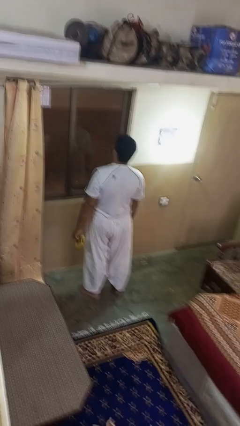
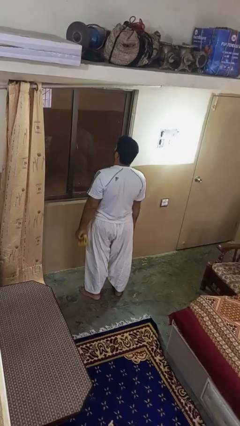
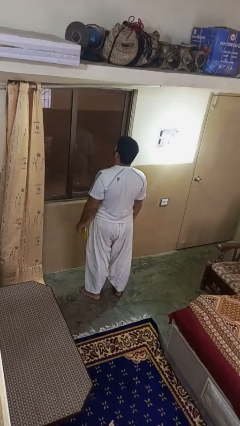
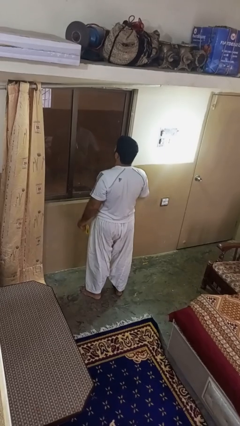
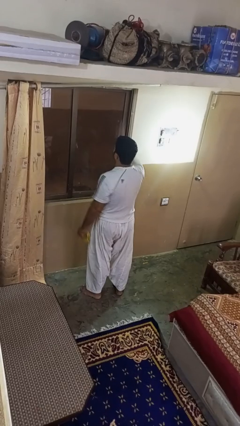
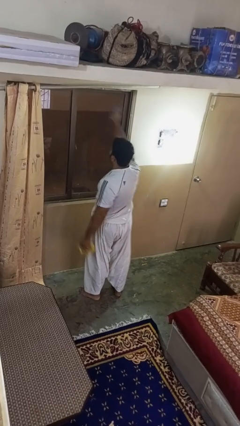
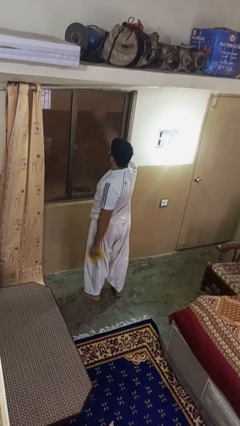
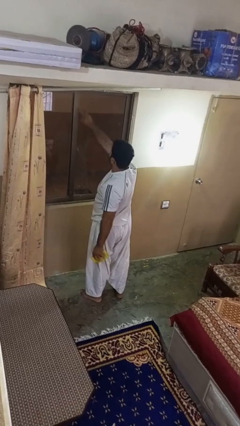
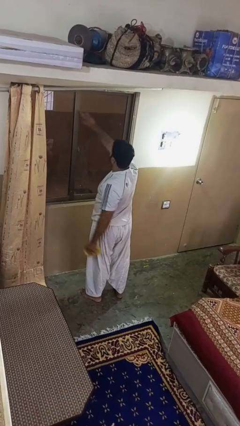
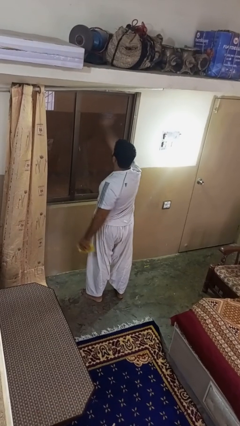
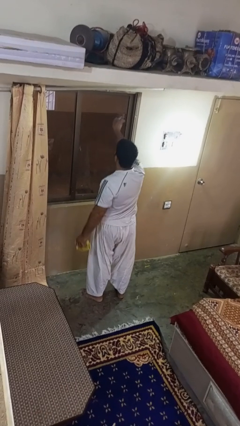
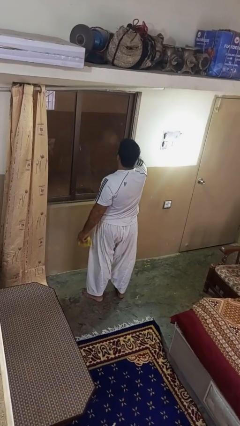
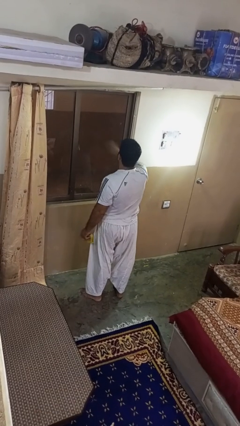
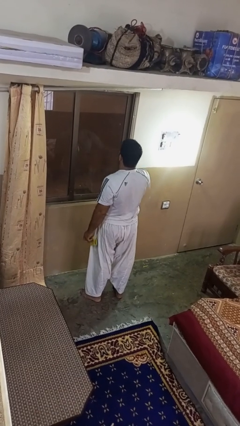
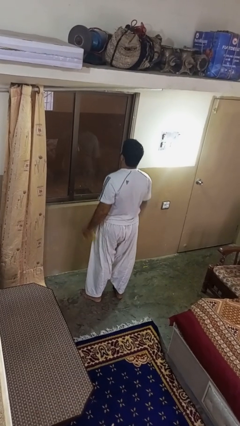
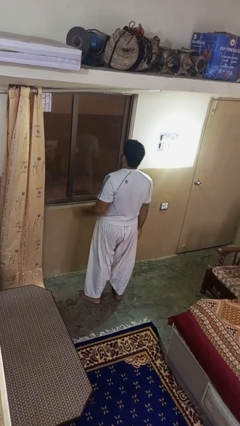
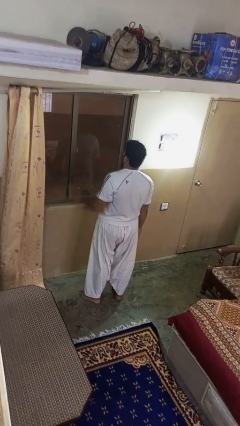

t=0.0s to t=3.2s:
person sprays from bottle

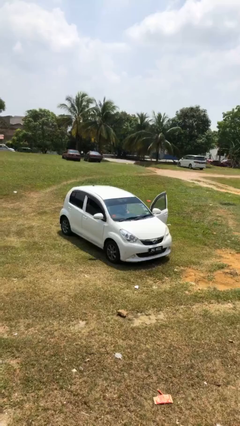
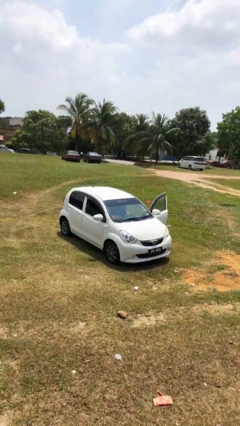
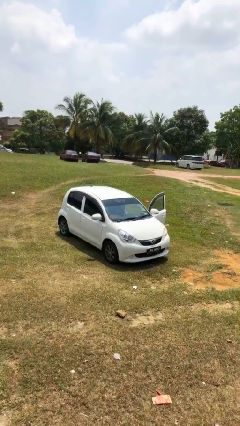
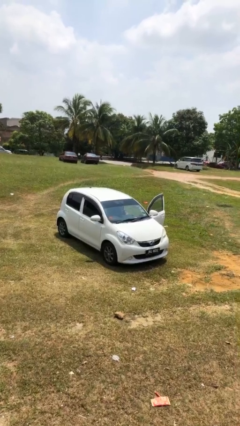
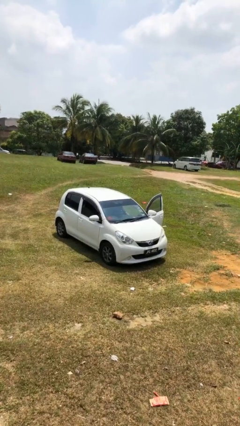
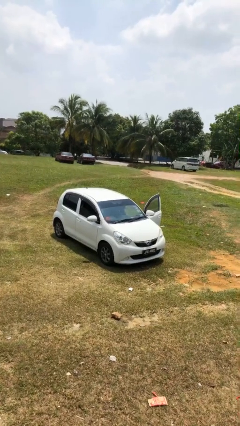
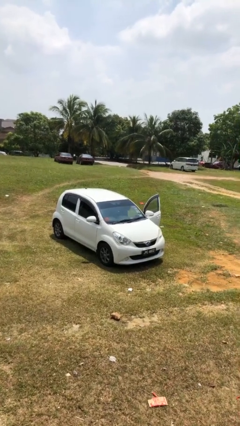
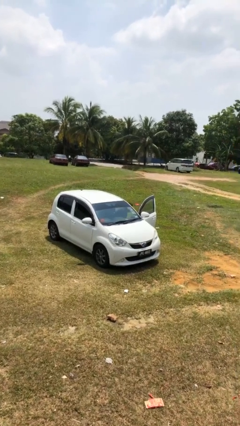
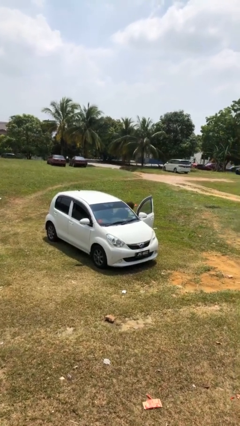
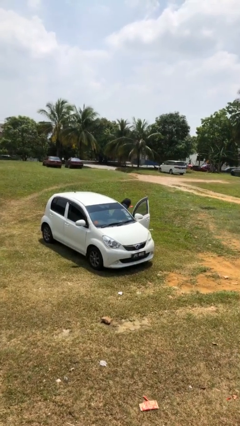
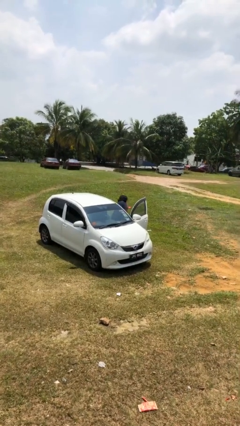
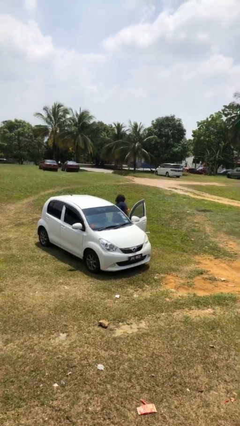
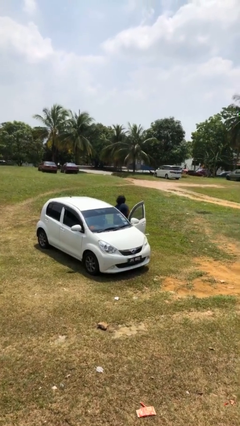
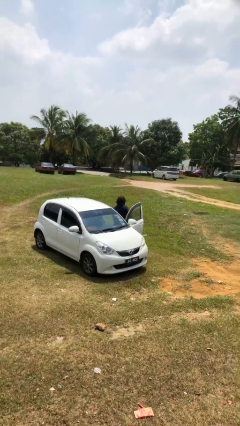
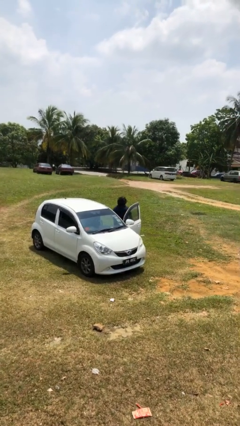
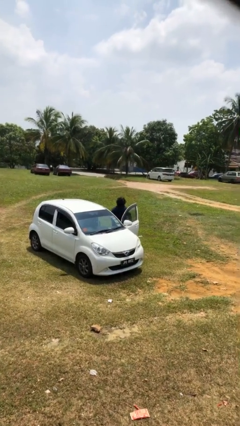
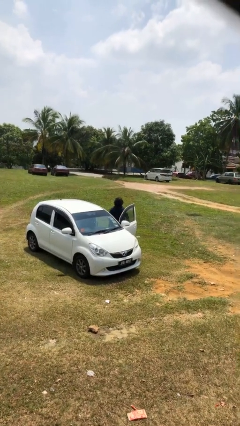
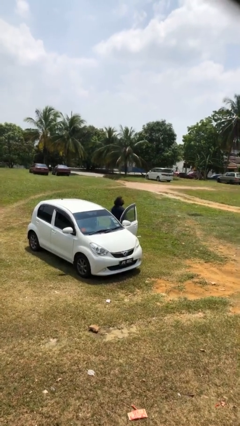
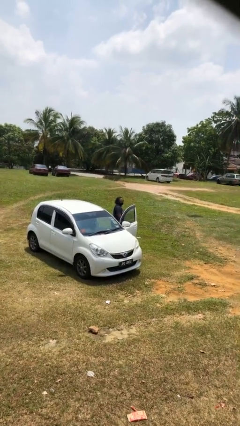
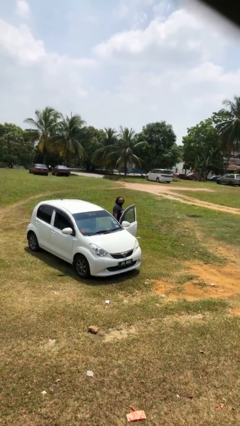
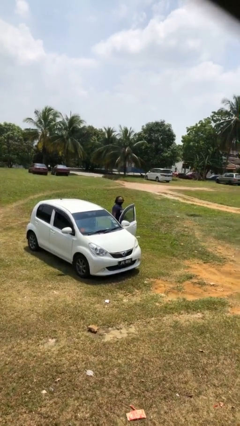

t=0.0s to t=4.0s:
person exits car

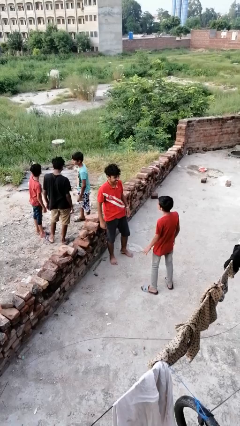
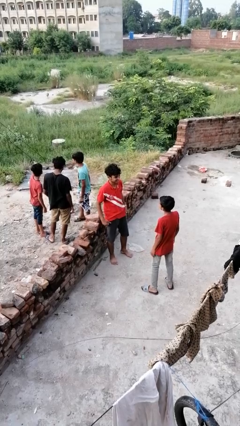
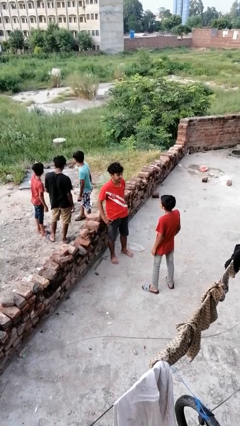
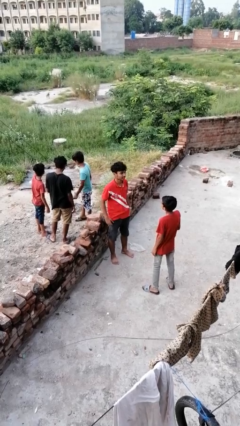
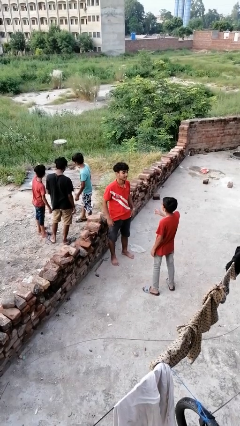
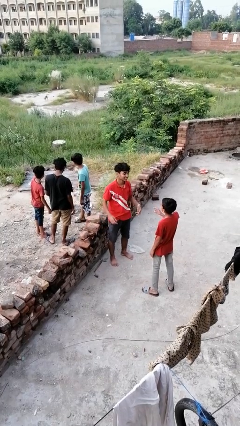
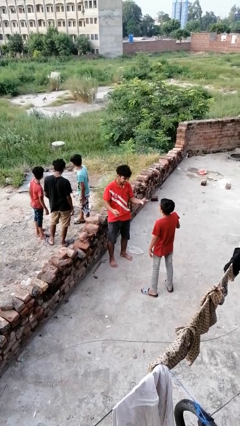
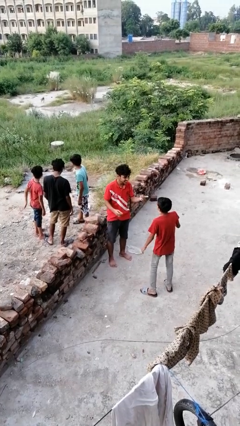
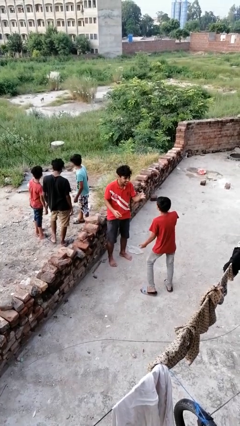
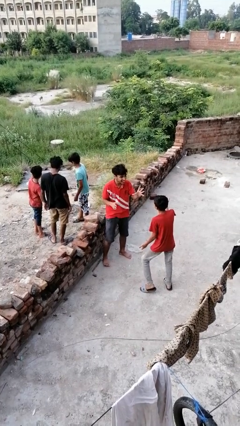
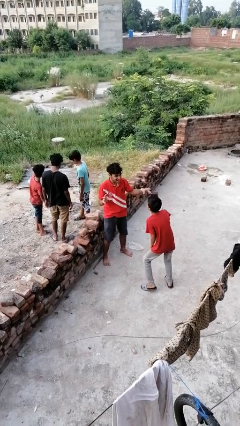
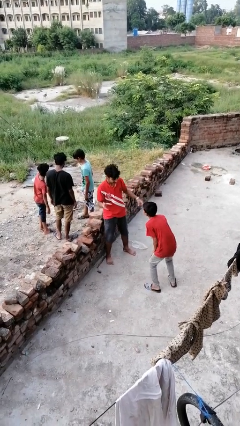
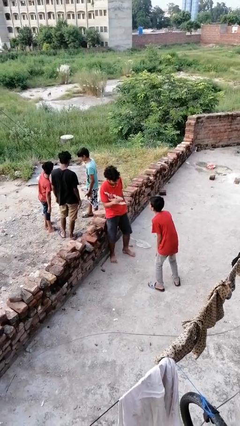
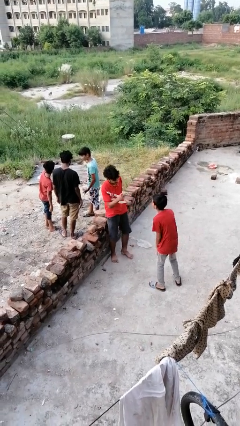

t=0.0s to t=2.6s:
person laughs with person

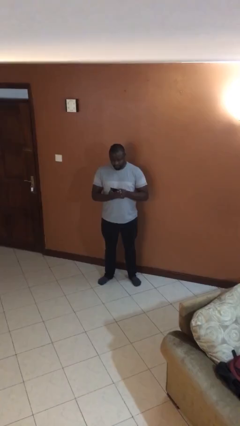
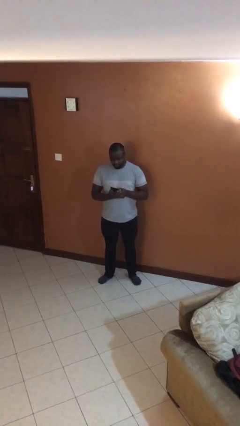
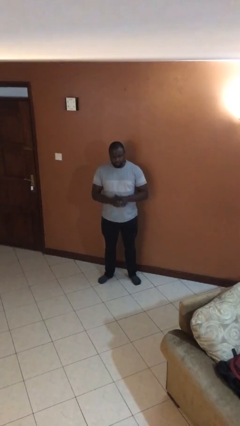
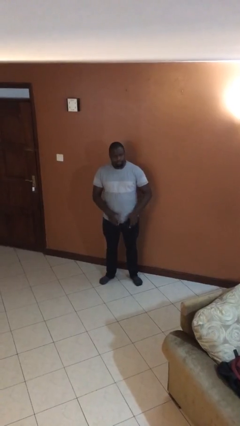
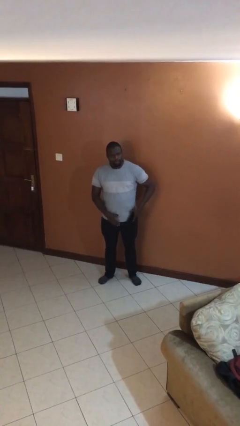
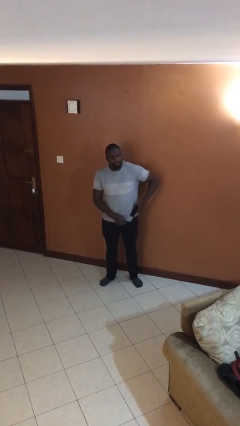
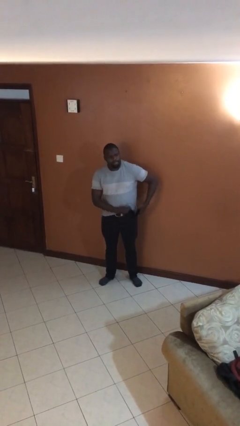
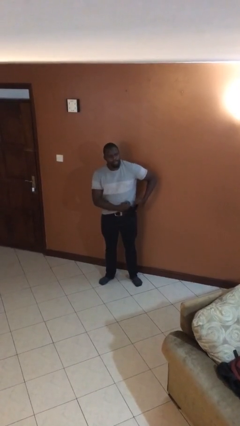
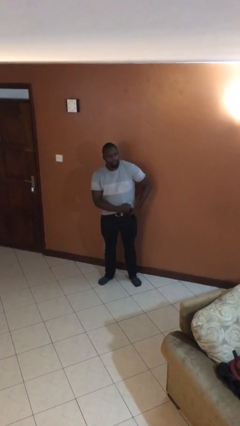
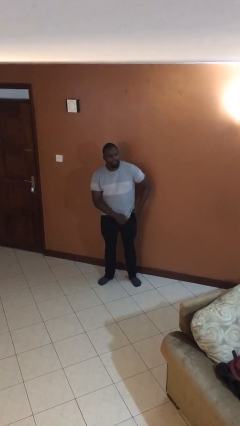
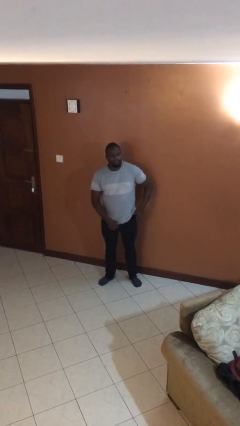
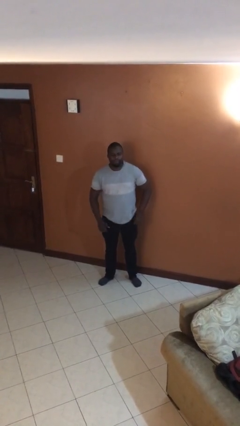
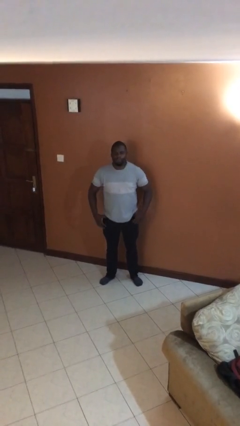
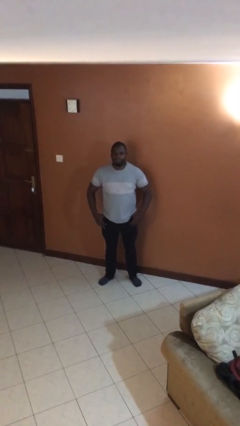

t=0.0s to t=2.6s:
person puts phone into pocket

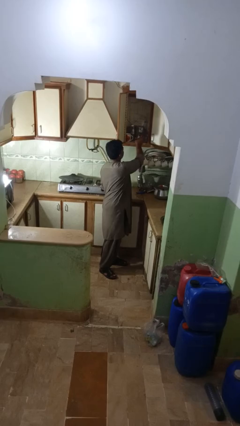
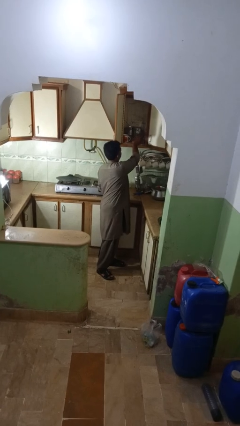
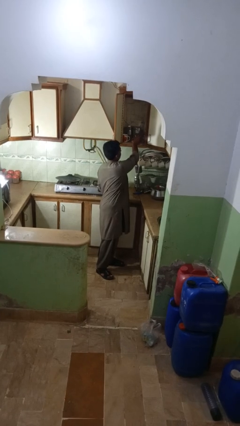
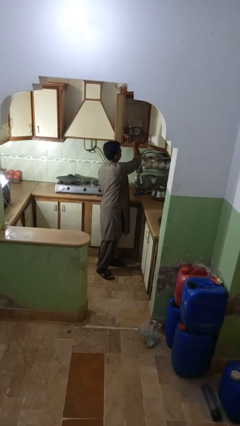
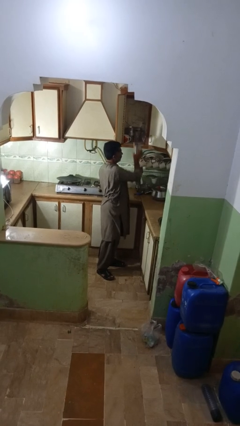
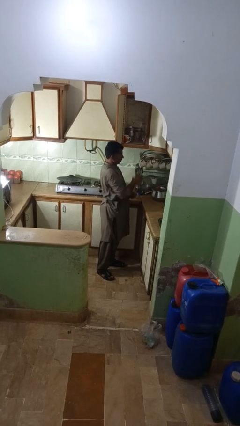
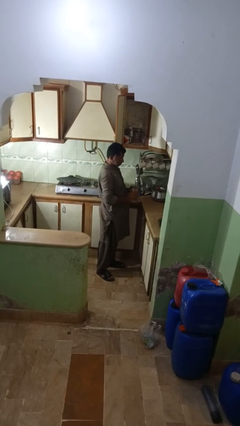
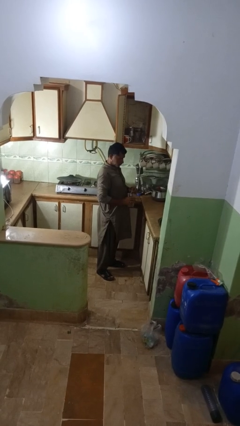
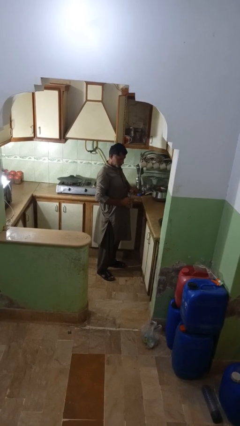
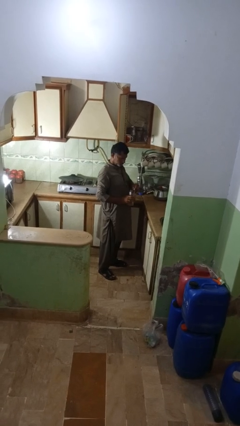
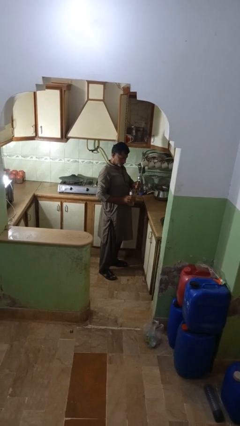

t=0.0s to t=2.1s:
person takes object from kitchen drawer

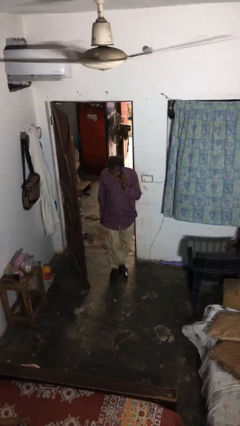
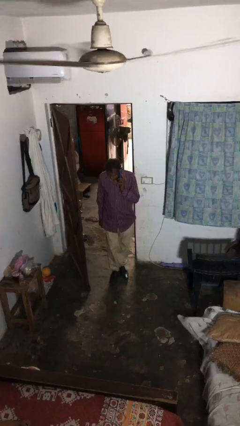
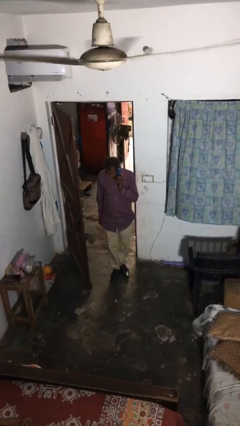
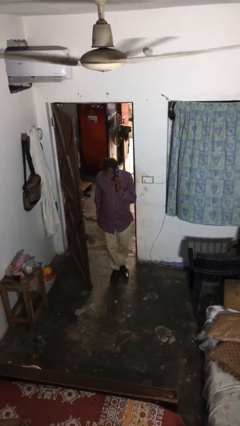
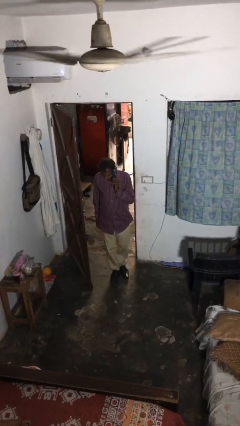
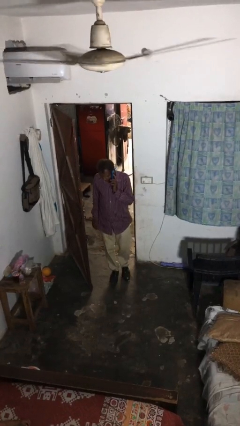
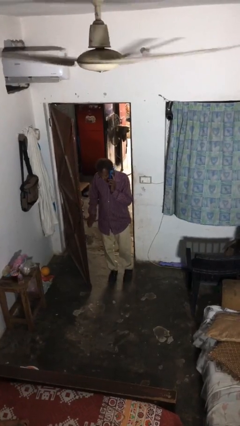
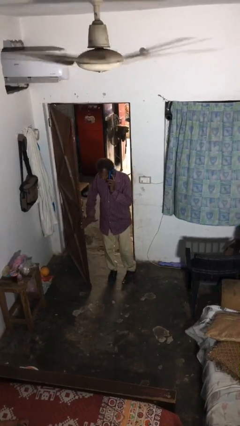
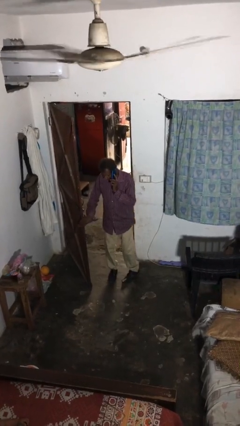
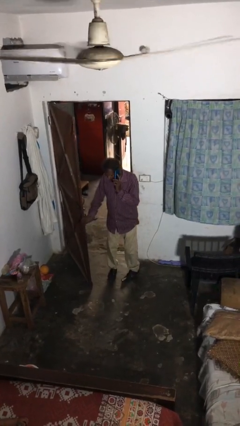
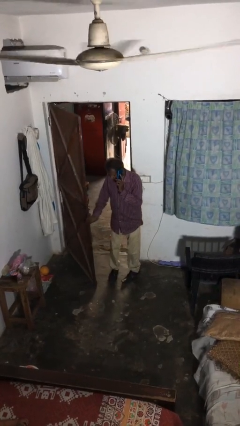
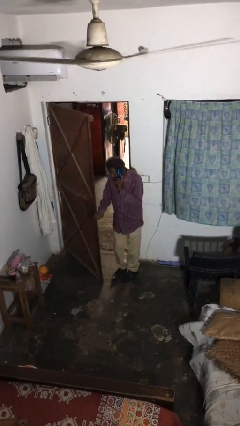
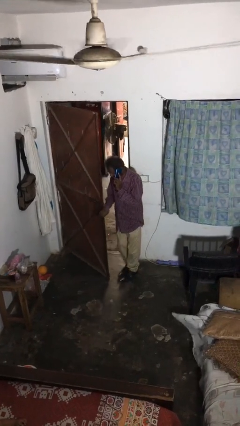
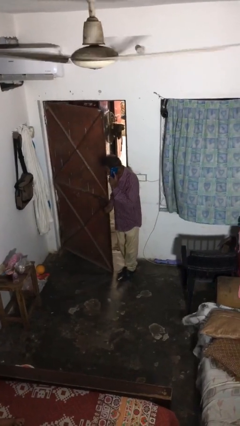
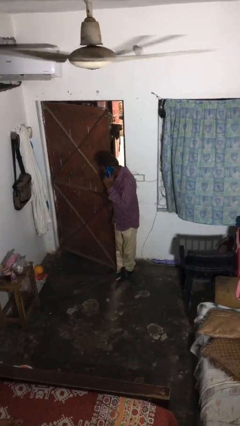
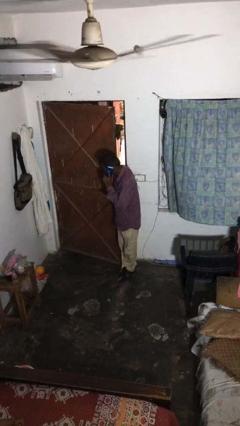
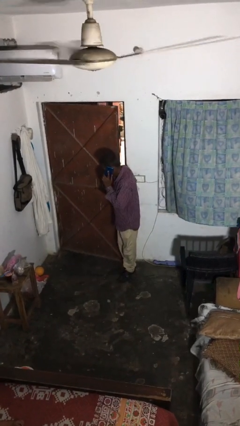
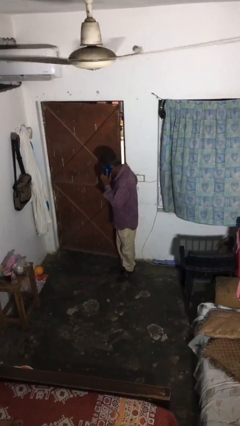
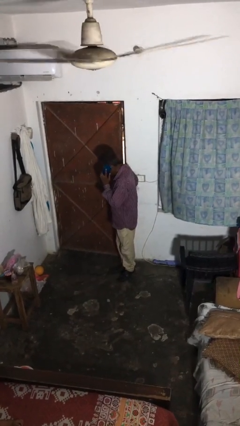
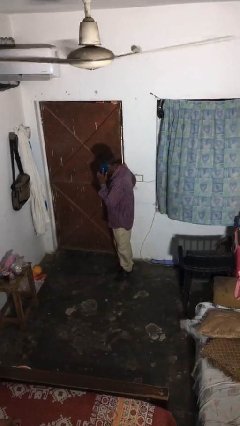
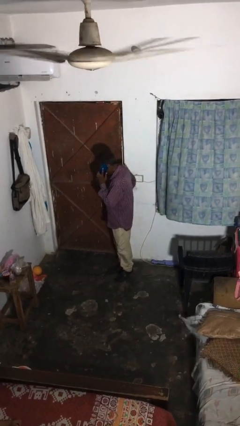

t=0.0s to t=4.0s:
person closes facility door
